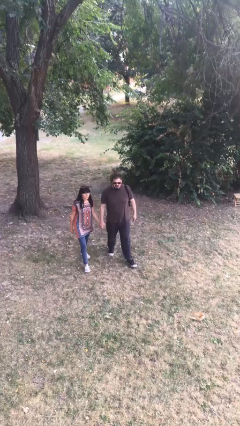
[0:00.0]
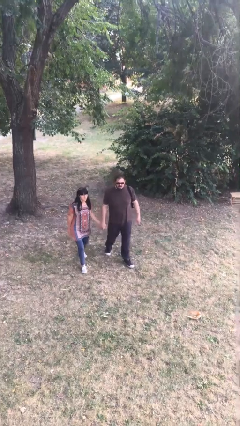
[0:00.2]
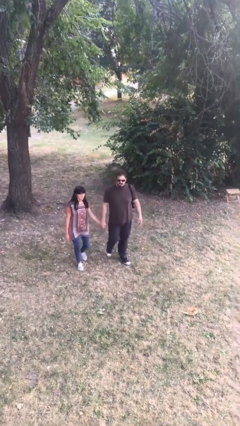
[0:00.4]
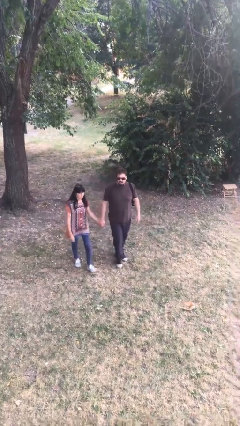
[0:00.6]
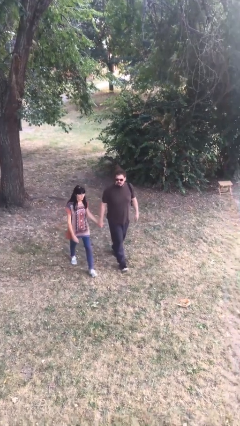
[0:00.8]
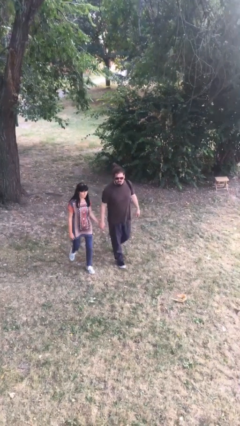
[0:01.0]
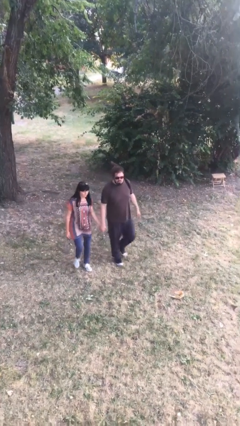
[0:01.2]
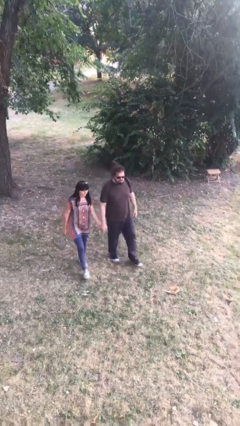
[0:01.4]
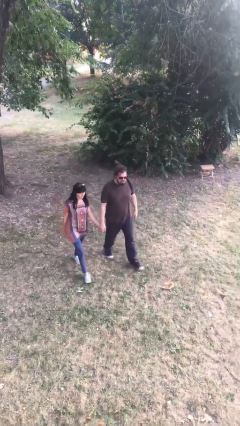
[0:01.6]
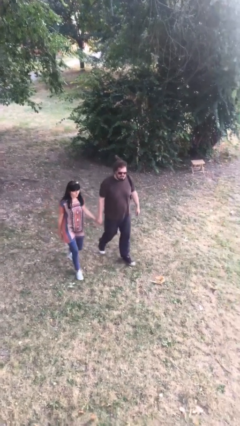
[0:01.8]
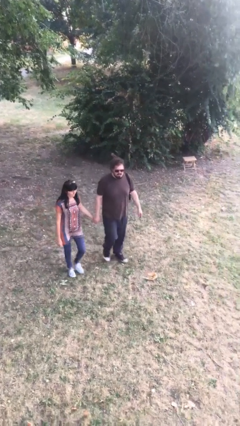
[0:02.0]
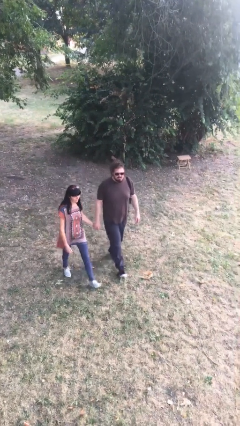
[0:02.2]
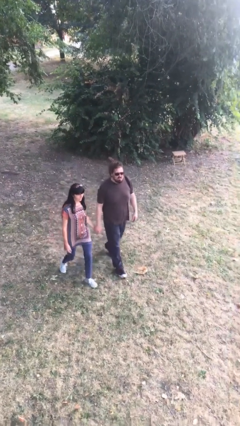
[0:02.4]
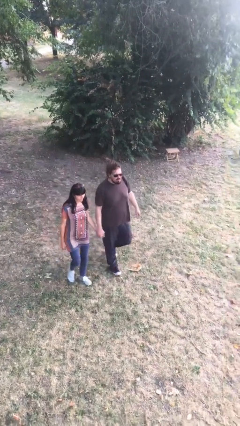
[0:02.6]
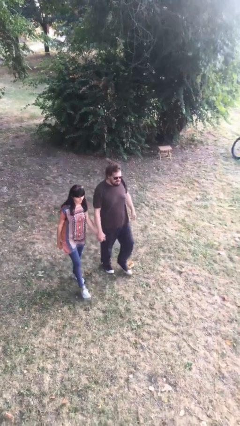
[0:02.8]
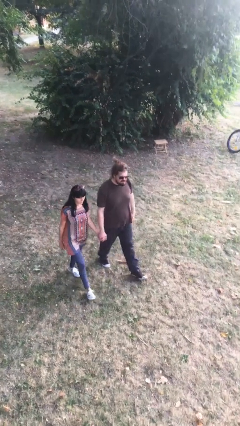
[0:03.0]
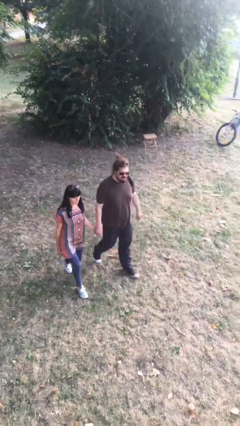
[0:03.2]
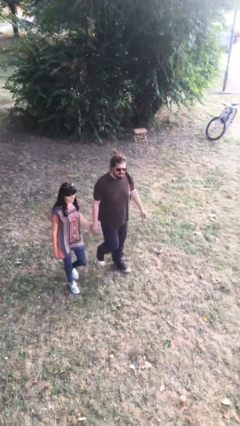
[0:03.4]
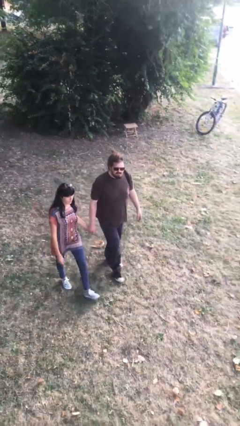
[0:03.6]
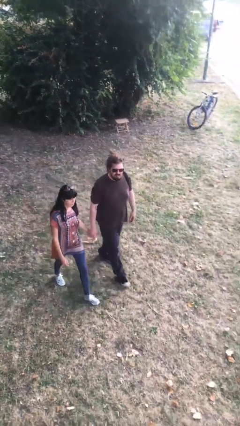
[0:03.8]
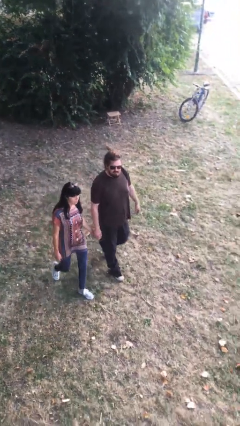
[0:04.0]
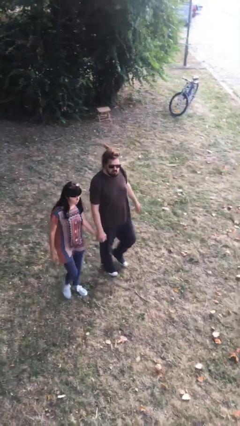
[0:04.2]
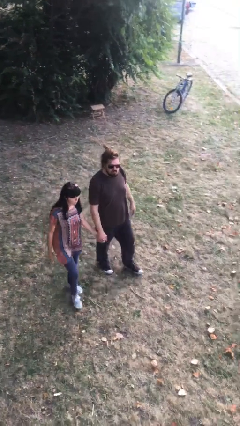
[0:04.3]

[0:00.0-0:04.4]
person holds hand

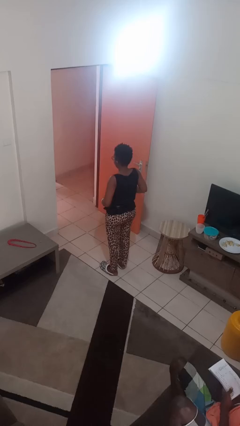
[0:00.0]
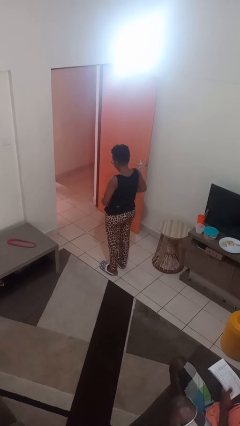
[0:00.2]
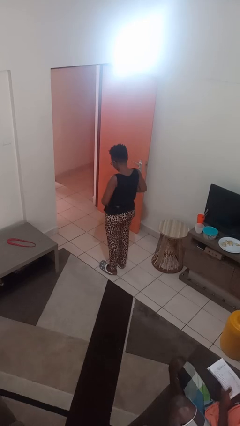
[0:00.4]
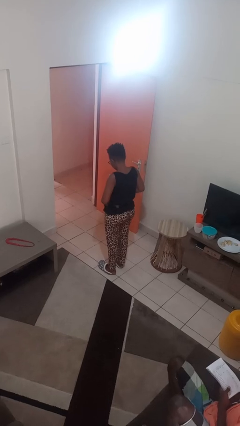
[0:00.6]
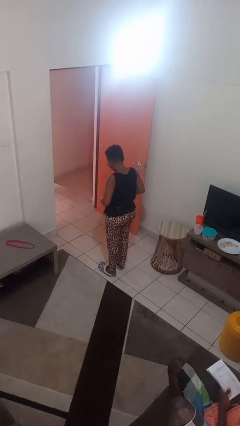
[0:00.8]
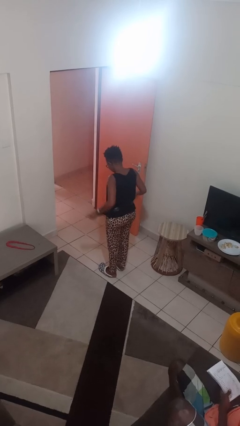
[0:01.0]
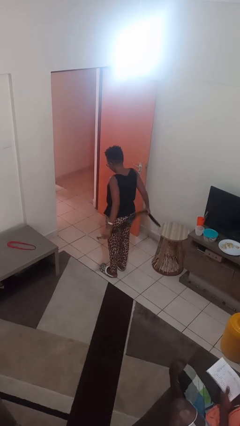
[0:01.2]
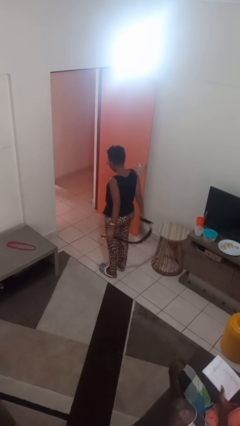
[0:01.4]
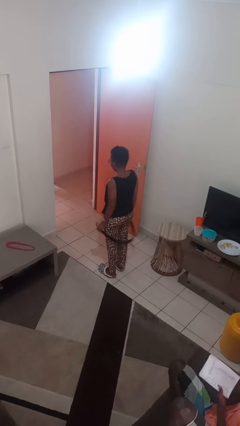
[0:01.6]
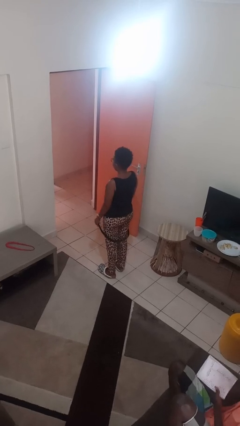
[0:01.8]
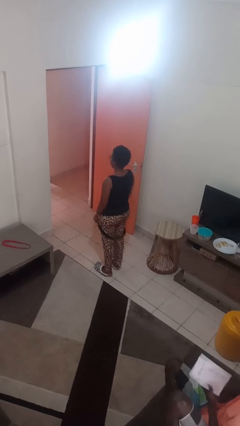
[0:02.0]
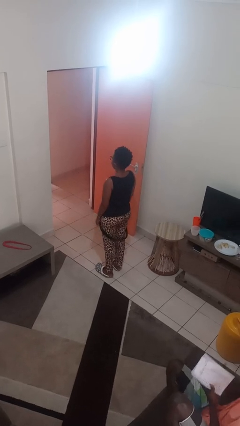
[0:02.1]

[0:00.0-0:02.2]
person takes off belt

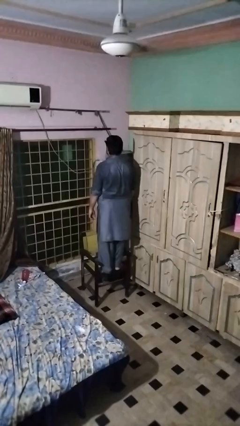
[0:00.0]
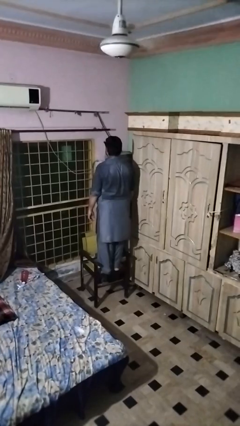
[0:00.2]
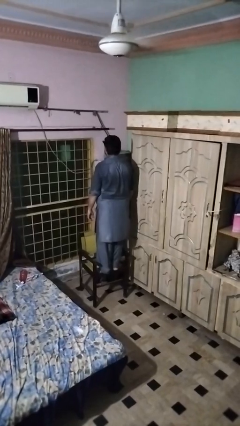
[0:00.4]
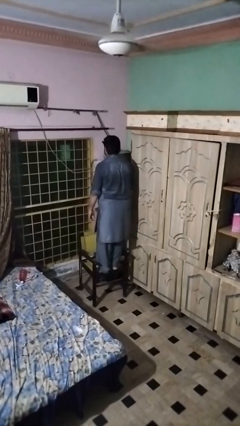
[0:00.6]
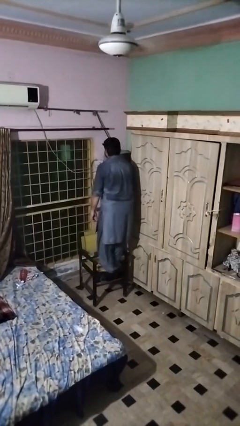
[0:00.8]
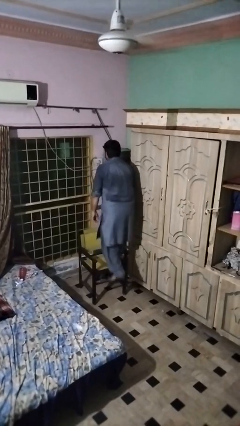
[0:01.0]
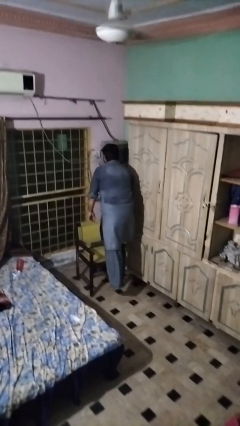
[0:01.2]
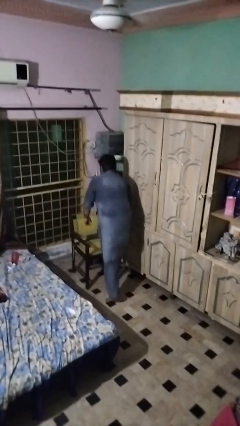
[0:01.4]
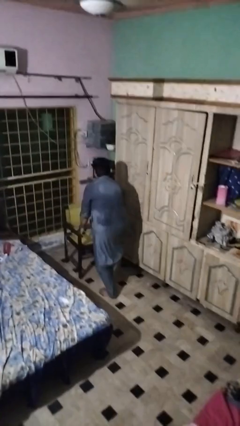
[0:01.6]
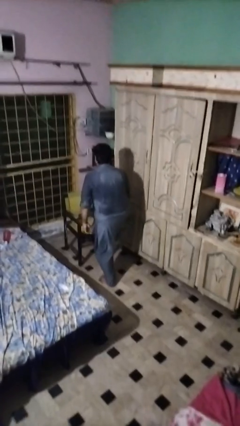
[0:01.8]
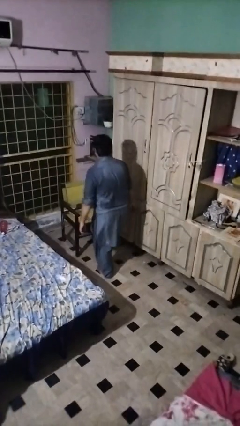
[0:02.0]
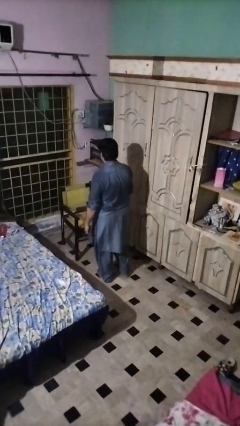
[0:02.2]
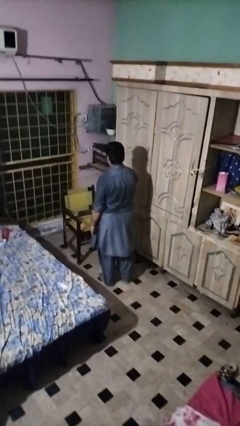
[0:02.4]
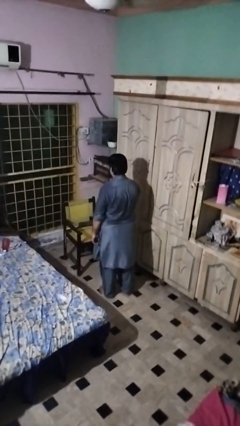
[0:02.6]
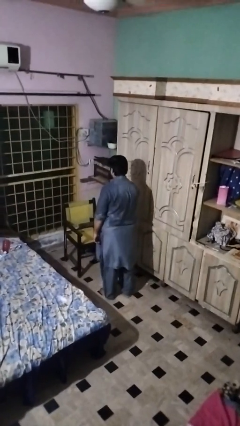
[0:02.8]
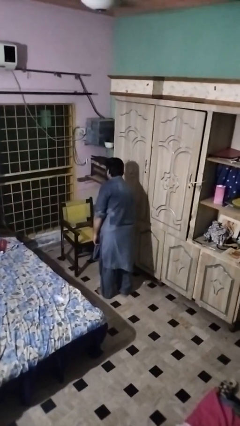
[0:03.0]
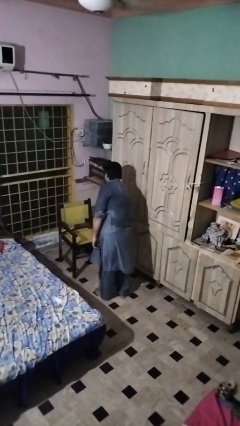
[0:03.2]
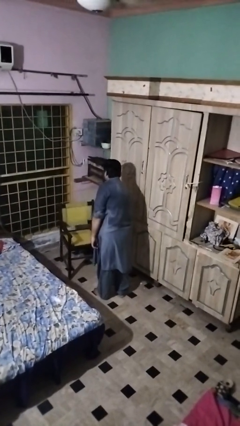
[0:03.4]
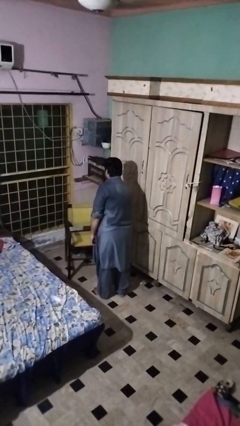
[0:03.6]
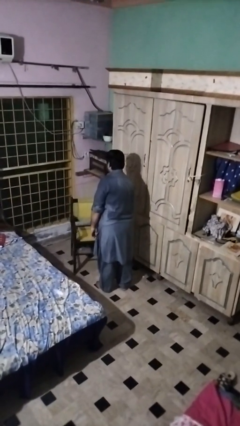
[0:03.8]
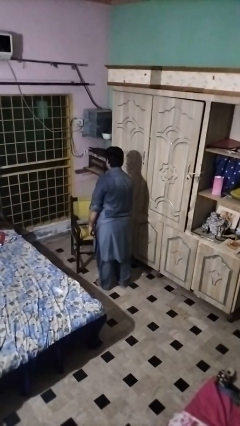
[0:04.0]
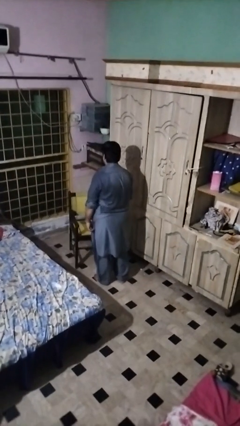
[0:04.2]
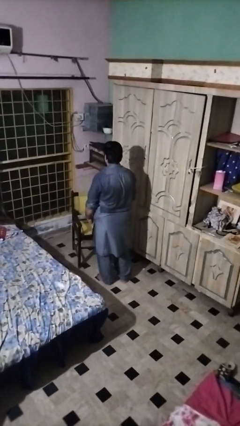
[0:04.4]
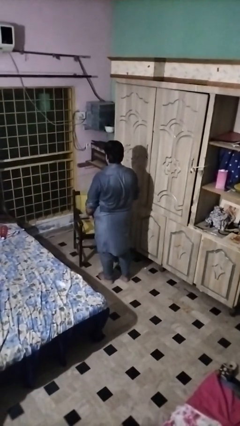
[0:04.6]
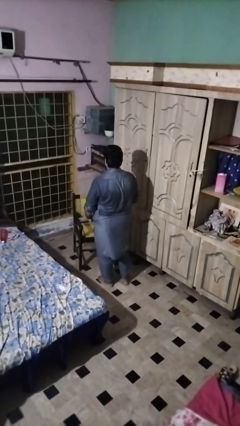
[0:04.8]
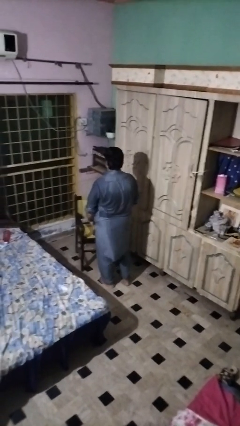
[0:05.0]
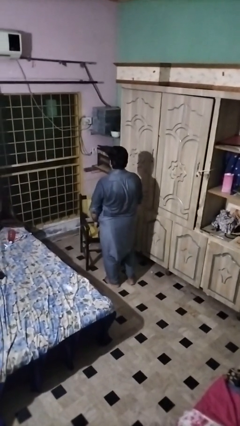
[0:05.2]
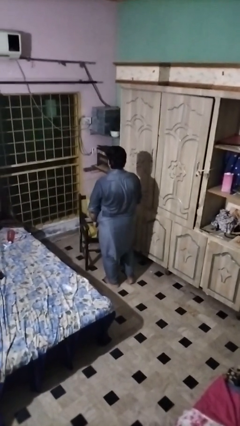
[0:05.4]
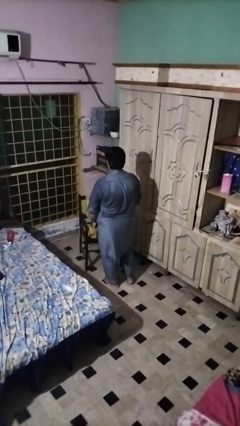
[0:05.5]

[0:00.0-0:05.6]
person climbs off chair

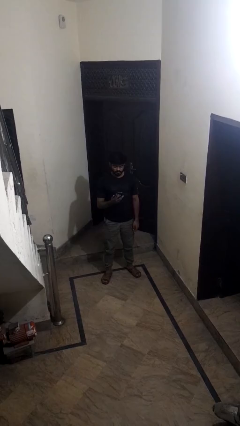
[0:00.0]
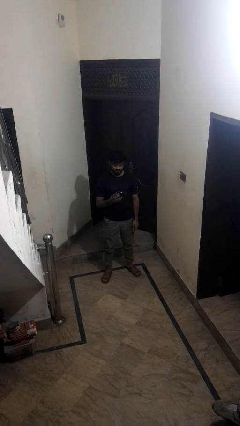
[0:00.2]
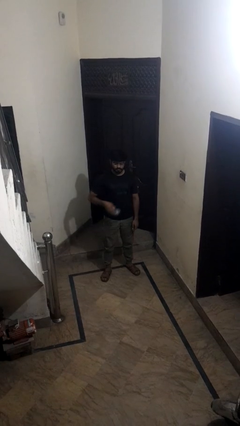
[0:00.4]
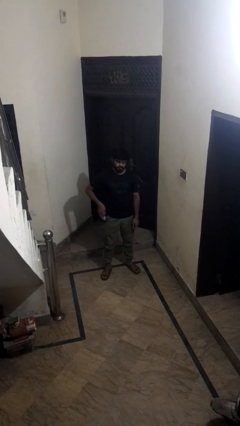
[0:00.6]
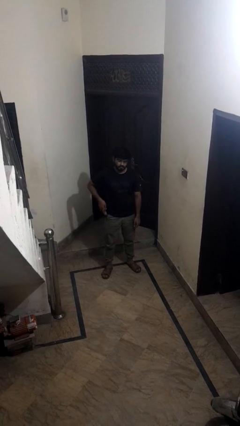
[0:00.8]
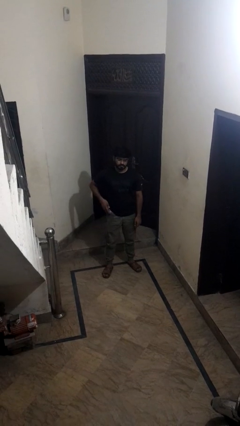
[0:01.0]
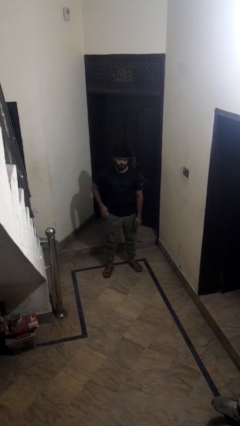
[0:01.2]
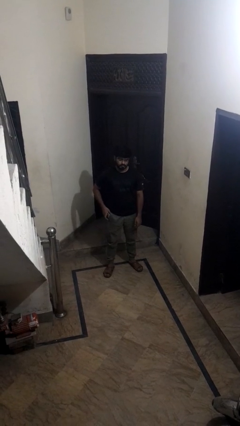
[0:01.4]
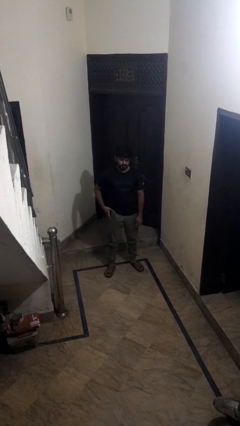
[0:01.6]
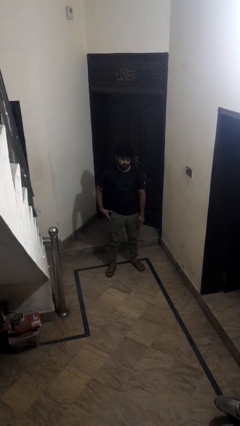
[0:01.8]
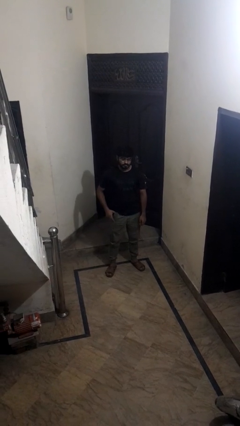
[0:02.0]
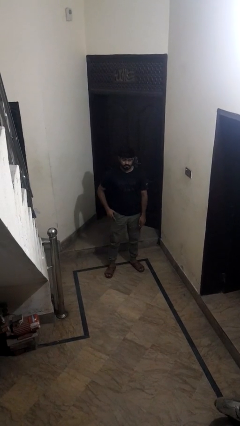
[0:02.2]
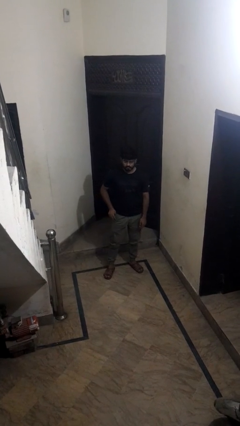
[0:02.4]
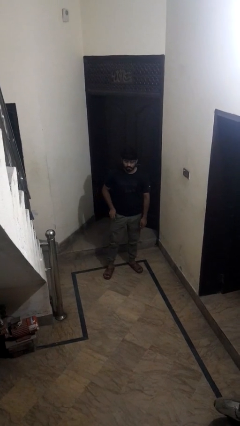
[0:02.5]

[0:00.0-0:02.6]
person puts phone into pocket

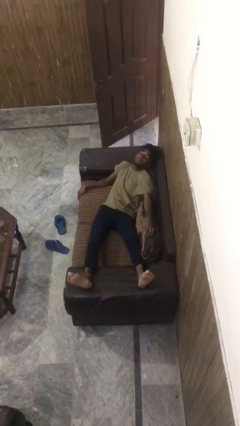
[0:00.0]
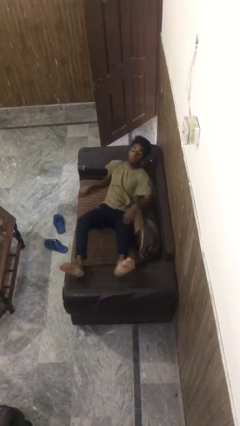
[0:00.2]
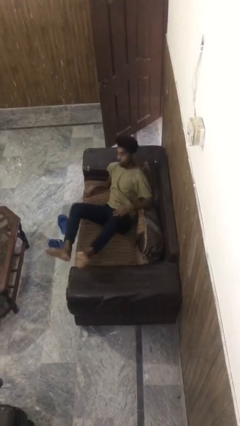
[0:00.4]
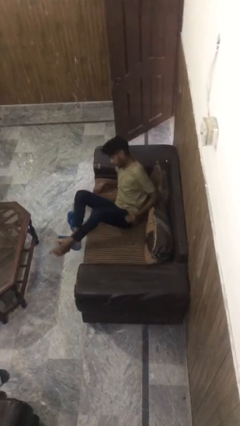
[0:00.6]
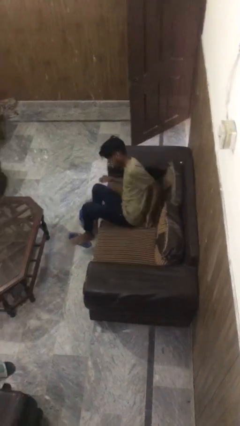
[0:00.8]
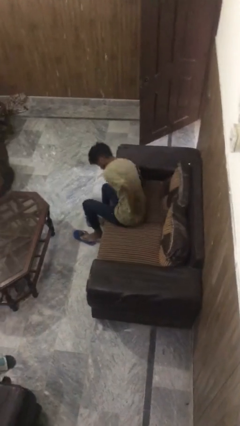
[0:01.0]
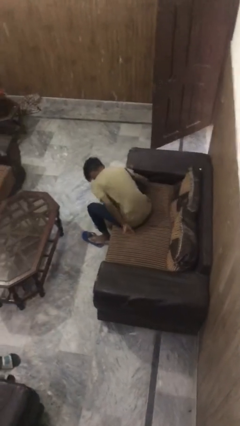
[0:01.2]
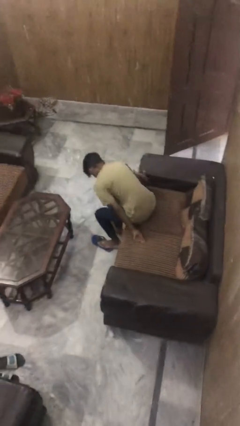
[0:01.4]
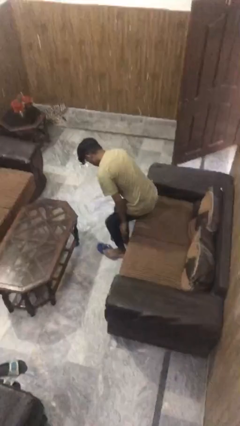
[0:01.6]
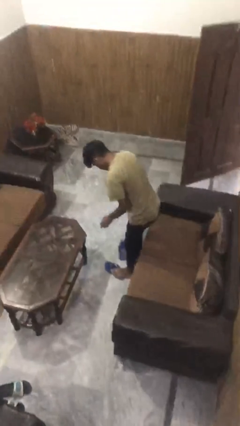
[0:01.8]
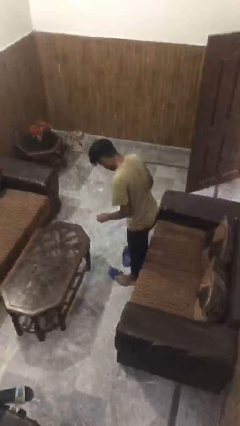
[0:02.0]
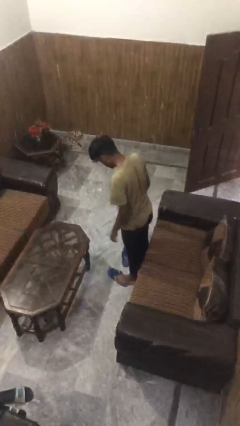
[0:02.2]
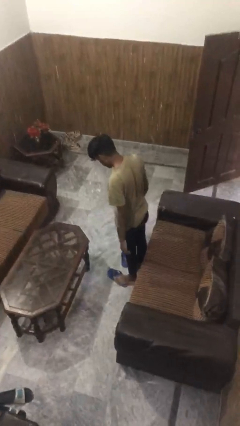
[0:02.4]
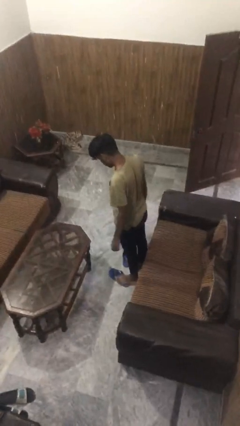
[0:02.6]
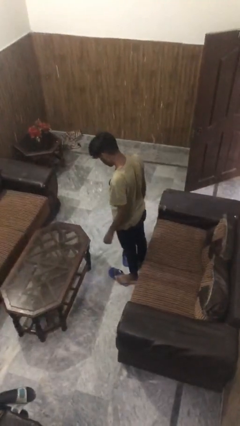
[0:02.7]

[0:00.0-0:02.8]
person stands up
